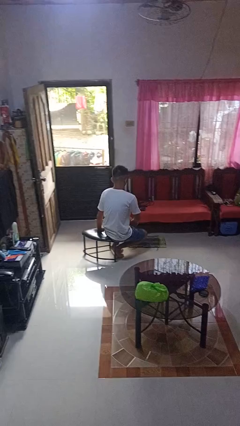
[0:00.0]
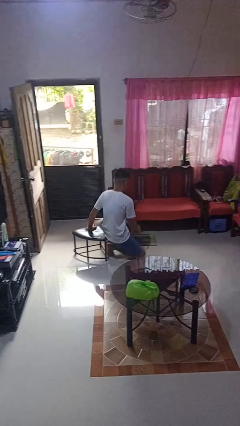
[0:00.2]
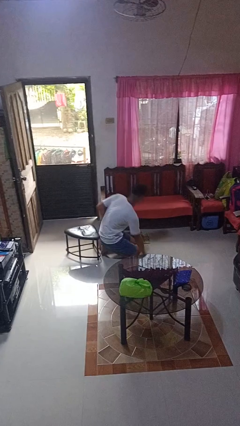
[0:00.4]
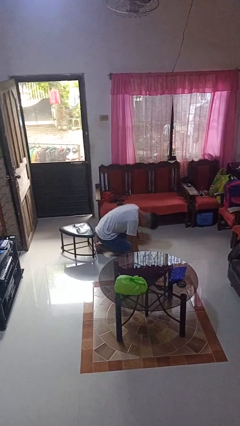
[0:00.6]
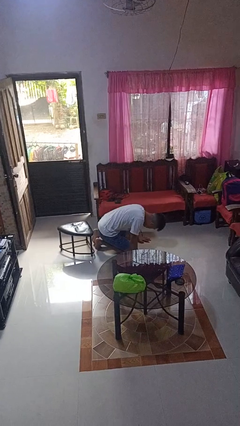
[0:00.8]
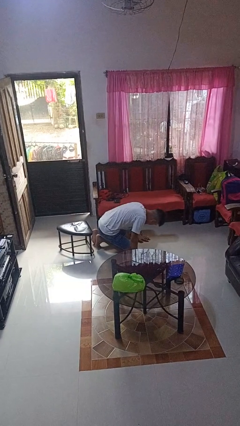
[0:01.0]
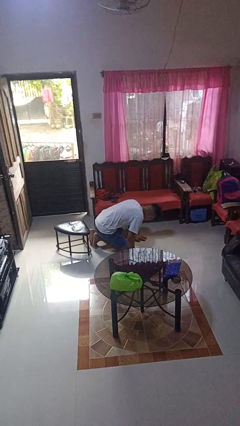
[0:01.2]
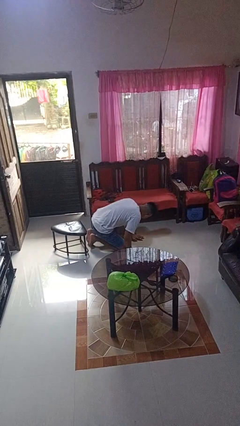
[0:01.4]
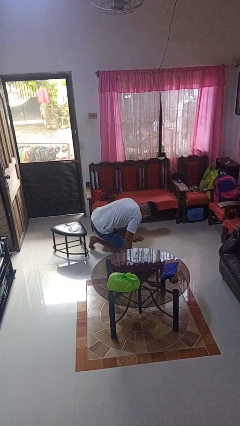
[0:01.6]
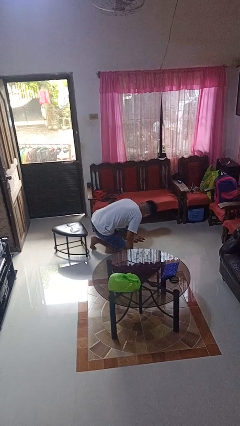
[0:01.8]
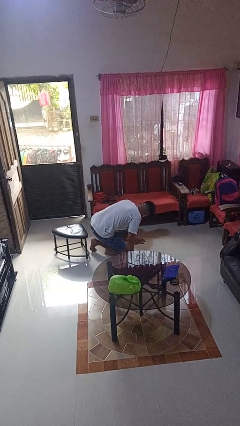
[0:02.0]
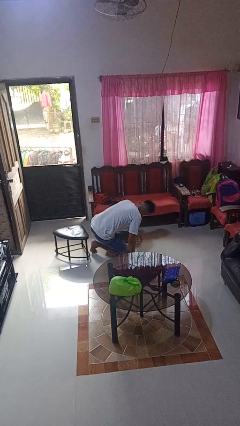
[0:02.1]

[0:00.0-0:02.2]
person falls from chair

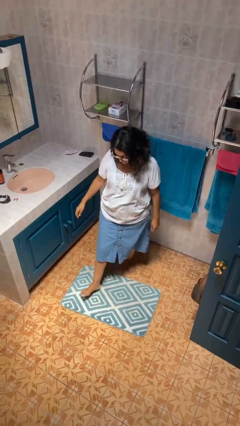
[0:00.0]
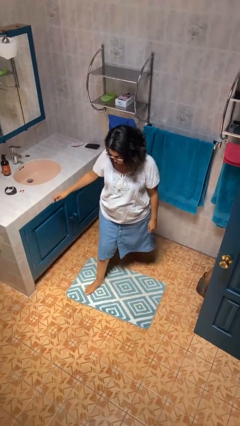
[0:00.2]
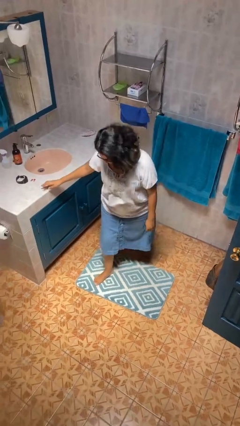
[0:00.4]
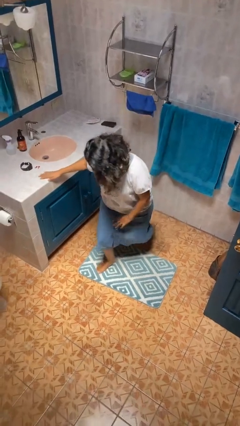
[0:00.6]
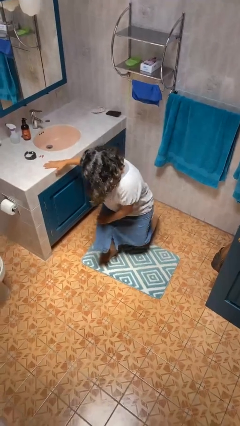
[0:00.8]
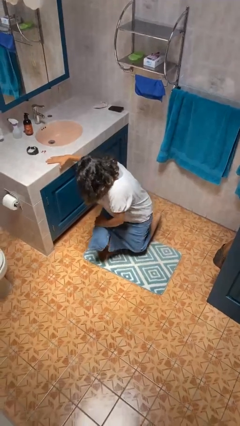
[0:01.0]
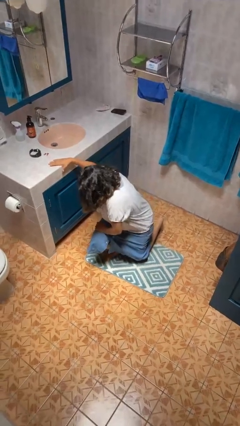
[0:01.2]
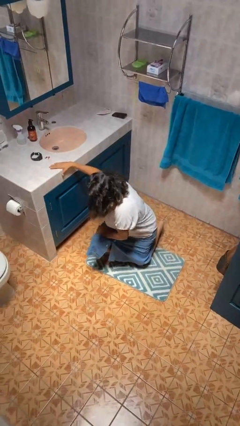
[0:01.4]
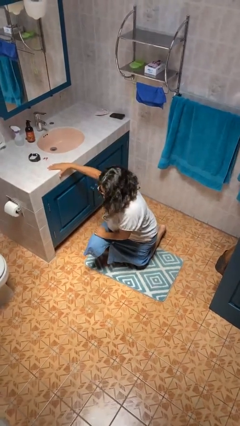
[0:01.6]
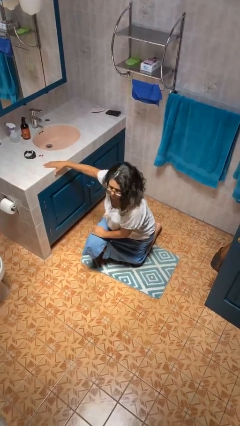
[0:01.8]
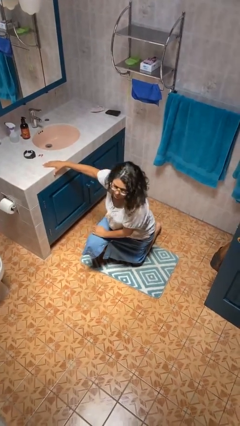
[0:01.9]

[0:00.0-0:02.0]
person kneels

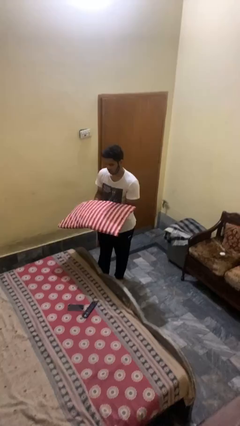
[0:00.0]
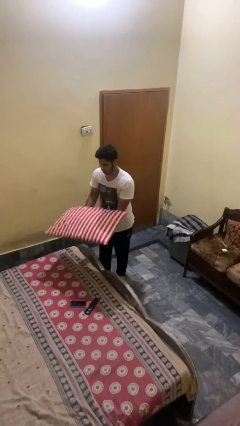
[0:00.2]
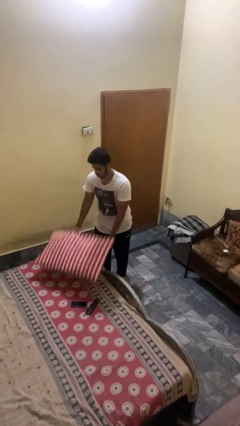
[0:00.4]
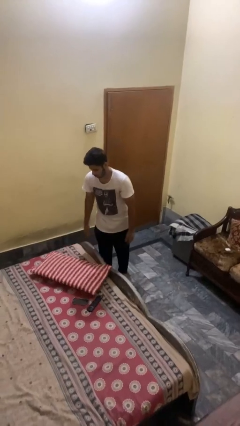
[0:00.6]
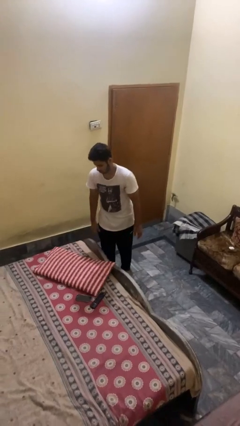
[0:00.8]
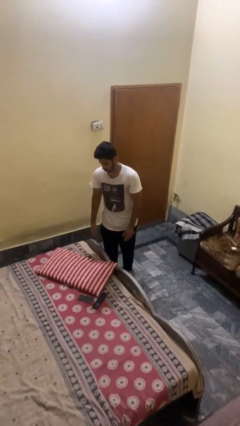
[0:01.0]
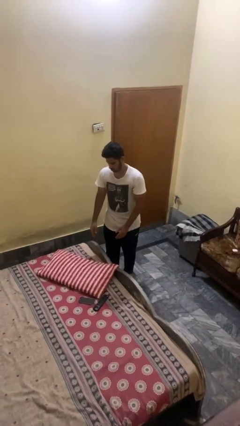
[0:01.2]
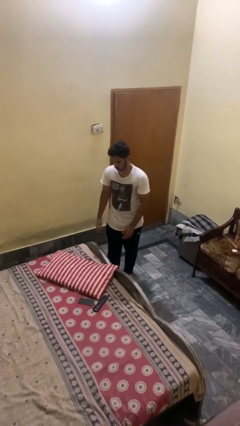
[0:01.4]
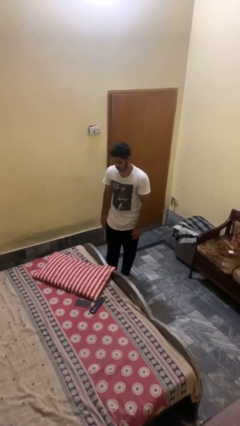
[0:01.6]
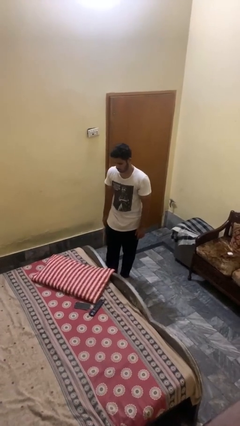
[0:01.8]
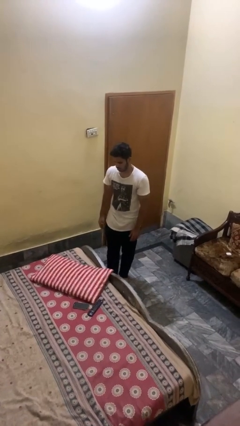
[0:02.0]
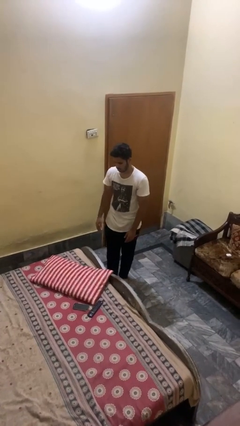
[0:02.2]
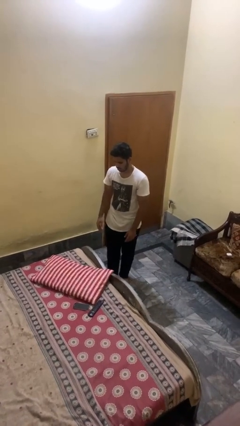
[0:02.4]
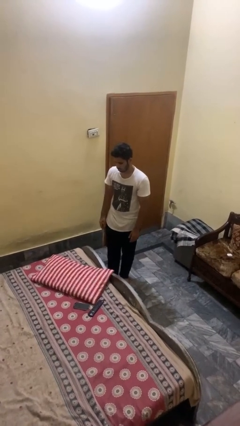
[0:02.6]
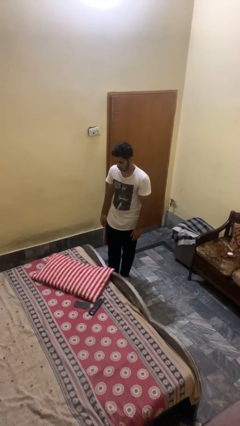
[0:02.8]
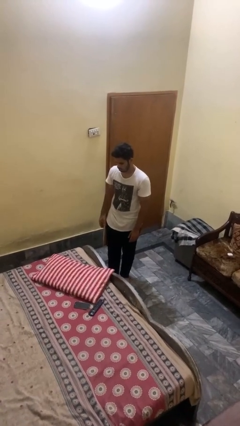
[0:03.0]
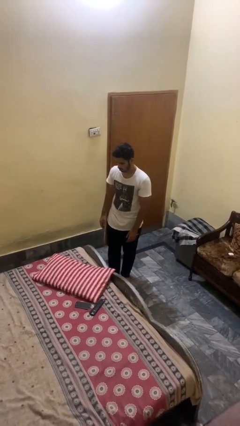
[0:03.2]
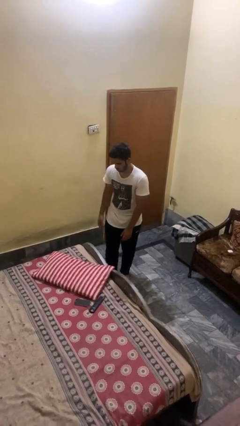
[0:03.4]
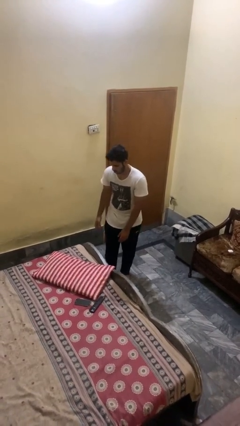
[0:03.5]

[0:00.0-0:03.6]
person puts down object on bed

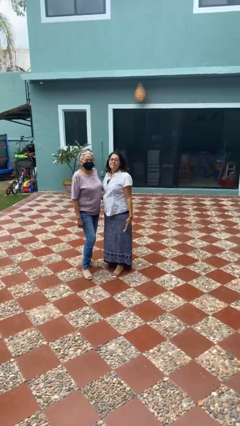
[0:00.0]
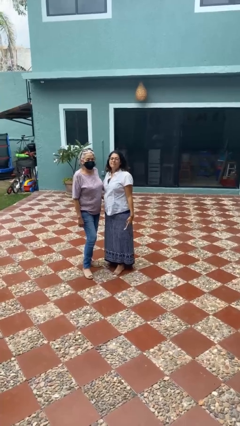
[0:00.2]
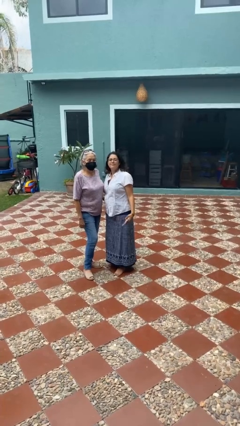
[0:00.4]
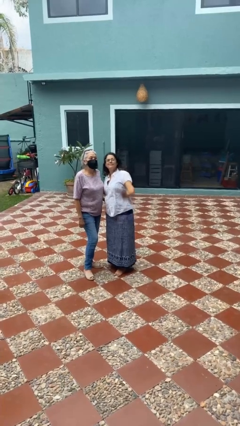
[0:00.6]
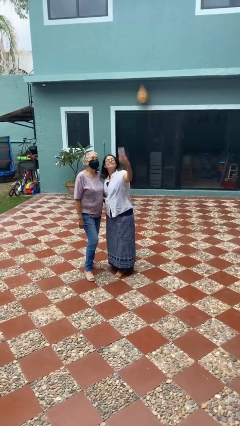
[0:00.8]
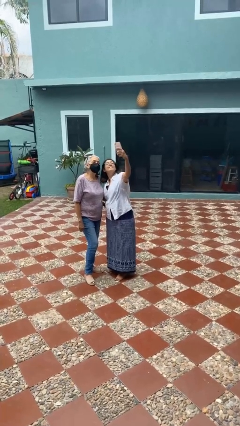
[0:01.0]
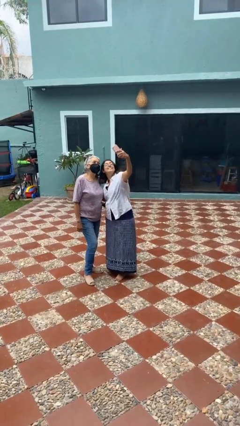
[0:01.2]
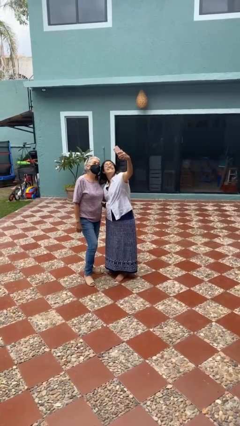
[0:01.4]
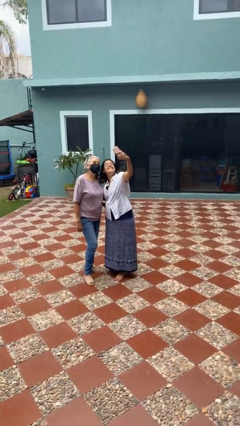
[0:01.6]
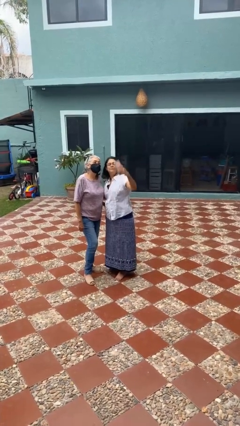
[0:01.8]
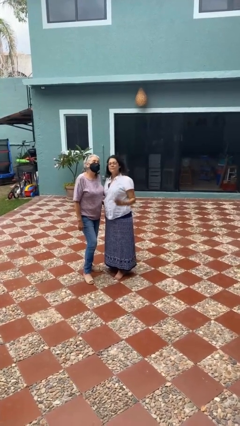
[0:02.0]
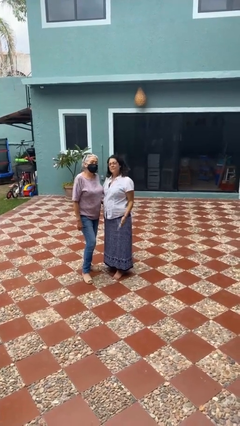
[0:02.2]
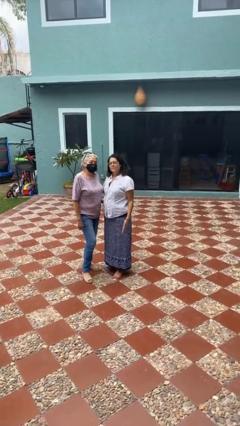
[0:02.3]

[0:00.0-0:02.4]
person takes selfie with person

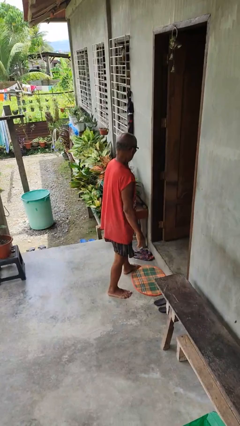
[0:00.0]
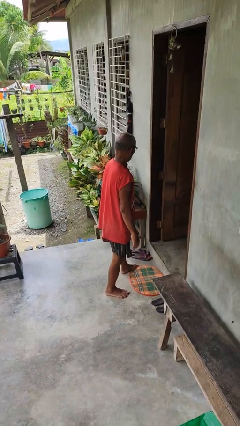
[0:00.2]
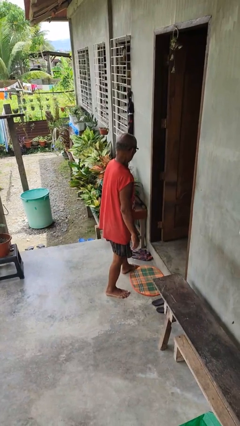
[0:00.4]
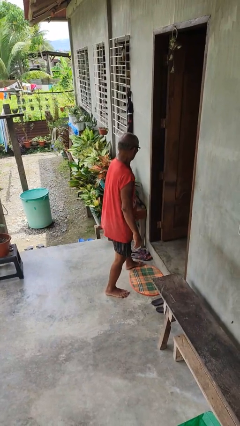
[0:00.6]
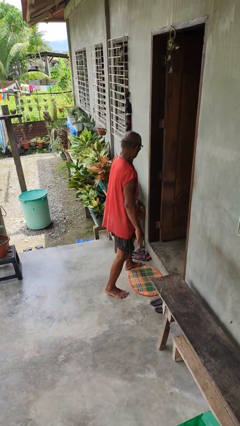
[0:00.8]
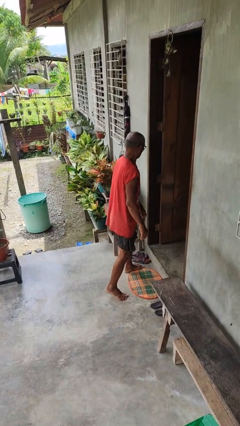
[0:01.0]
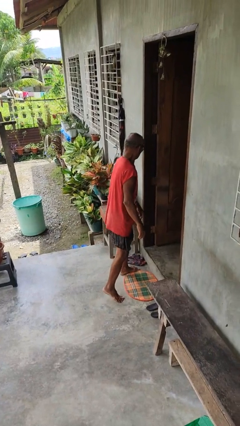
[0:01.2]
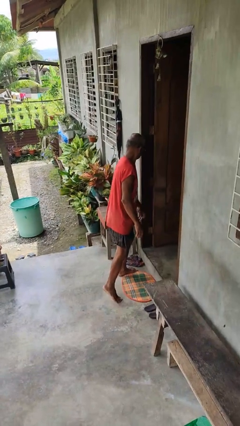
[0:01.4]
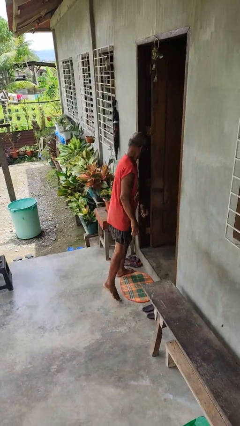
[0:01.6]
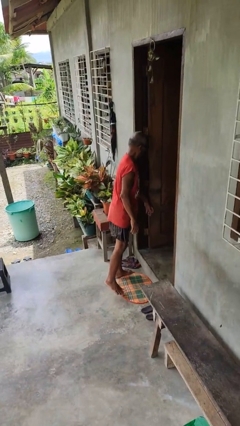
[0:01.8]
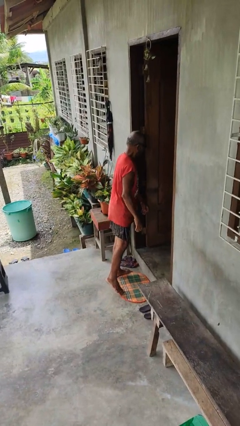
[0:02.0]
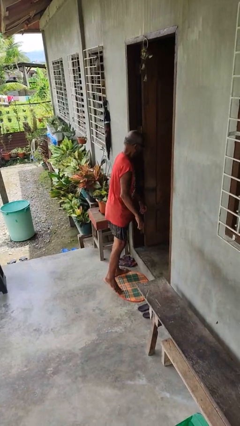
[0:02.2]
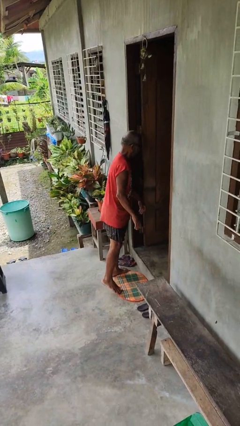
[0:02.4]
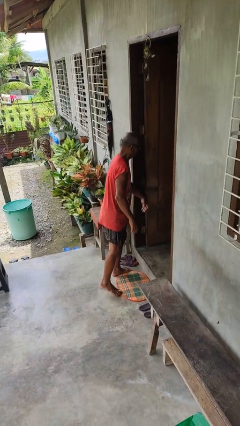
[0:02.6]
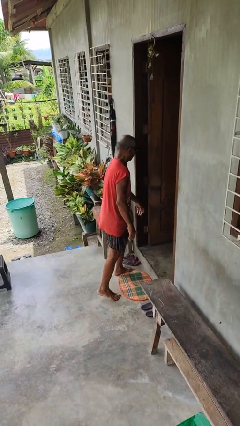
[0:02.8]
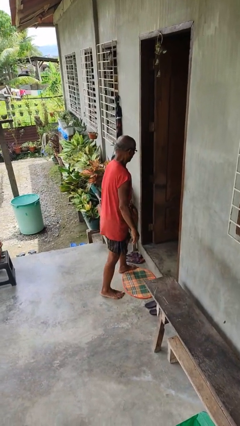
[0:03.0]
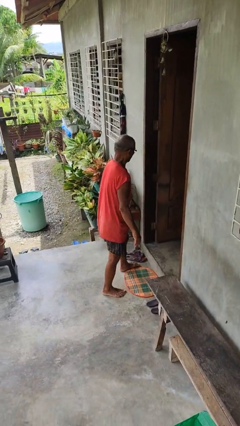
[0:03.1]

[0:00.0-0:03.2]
person bumps into wall

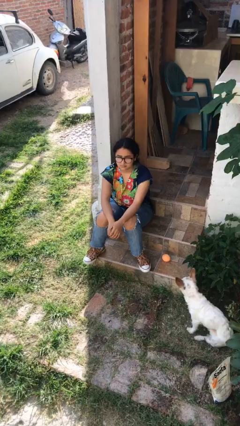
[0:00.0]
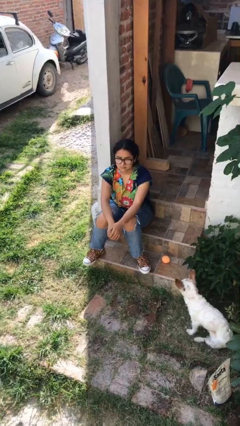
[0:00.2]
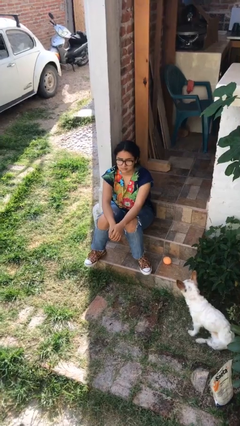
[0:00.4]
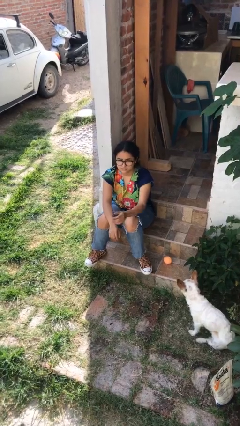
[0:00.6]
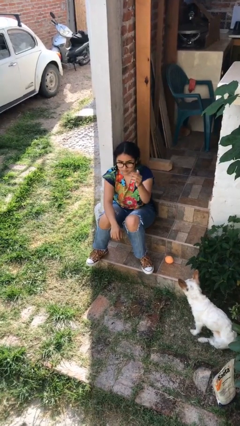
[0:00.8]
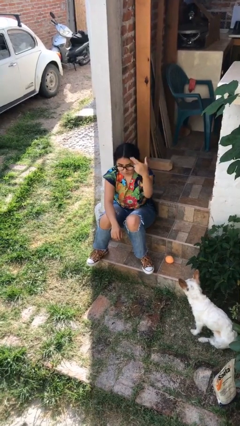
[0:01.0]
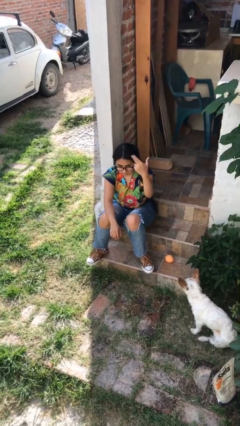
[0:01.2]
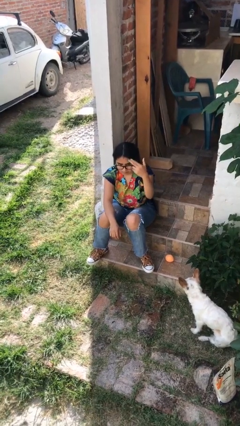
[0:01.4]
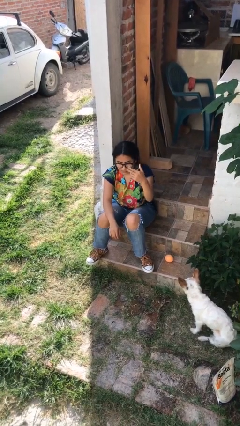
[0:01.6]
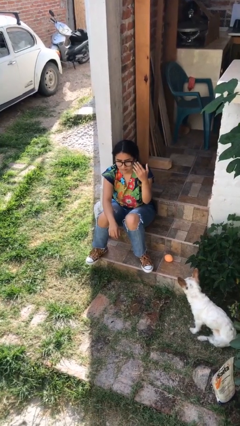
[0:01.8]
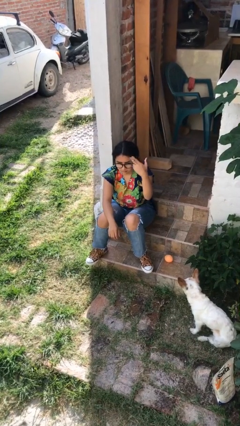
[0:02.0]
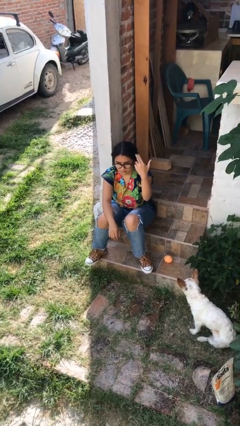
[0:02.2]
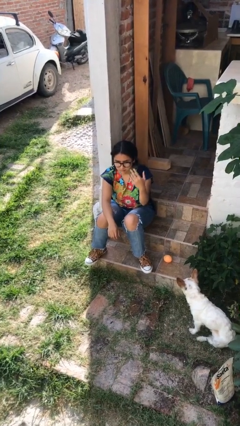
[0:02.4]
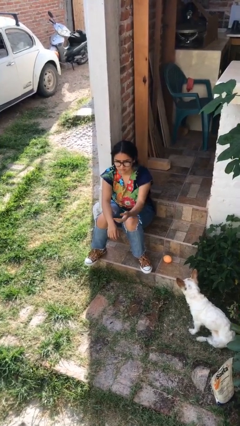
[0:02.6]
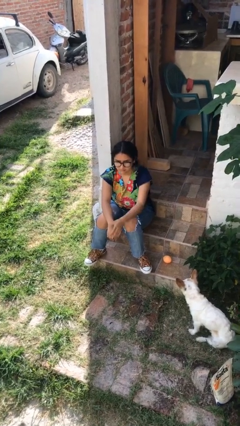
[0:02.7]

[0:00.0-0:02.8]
person gestures come here

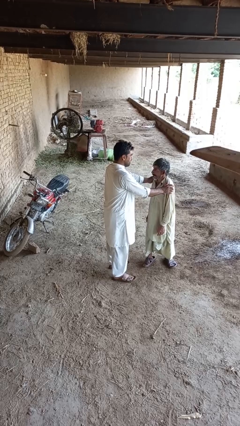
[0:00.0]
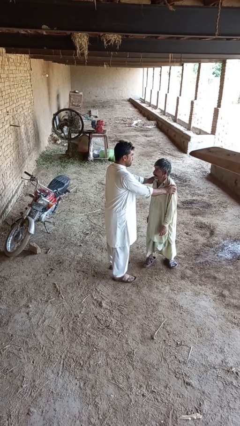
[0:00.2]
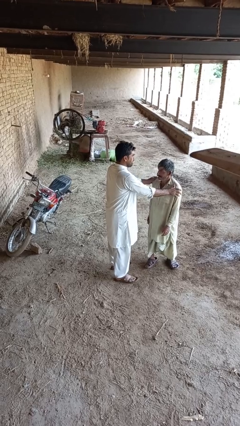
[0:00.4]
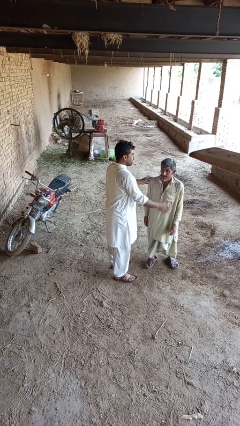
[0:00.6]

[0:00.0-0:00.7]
person spins person around

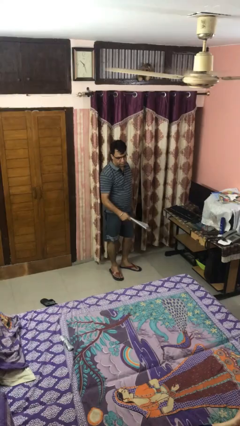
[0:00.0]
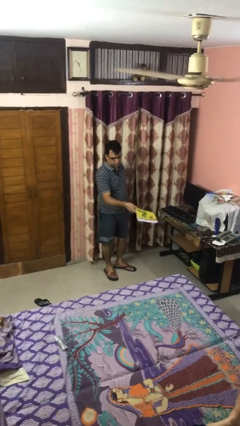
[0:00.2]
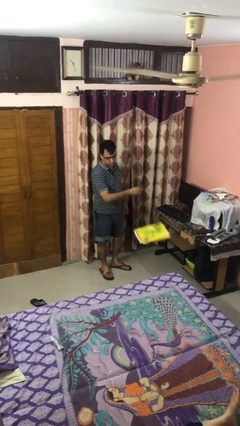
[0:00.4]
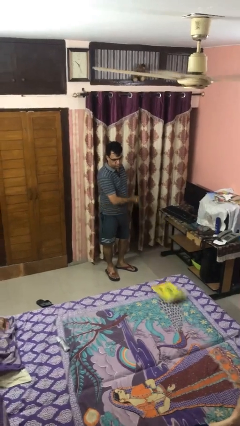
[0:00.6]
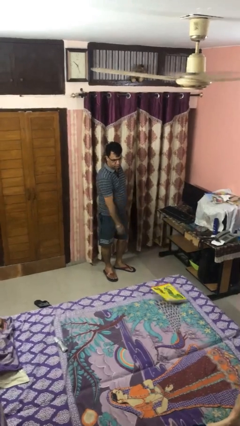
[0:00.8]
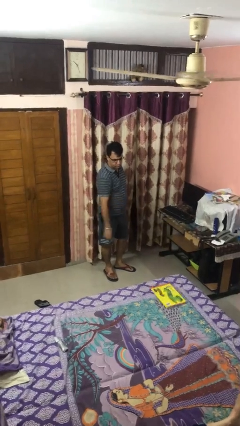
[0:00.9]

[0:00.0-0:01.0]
person throws object on bed
